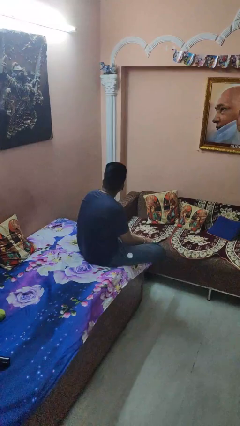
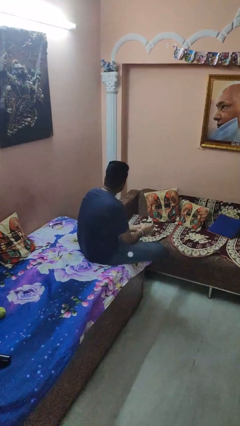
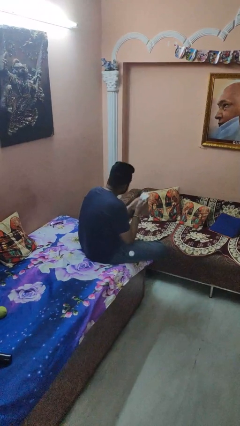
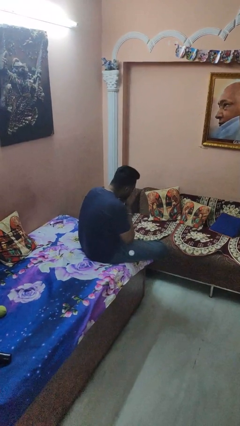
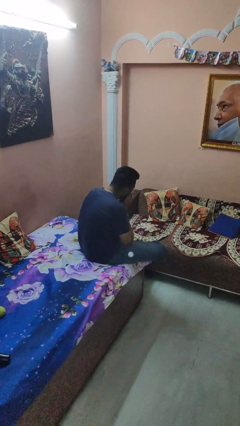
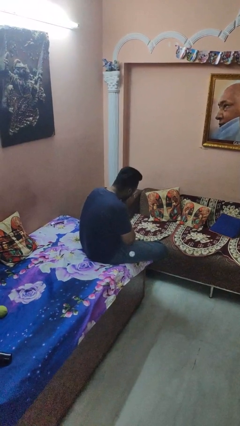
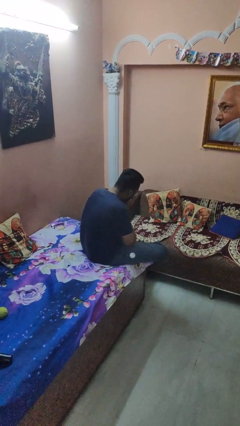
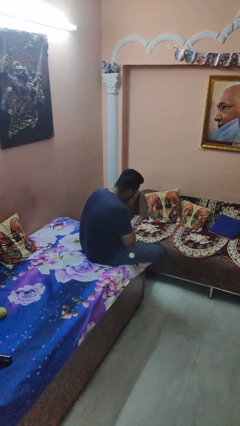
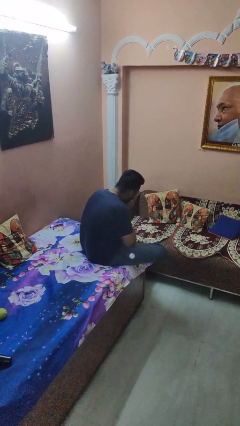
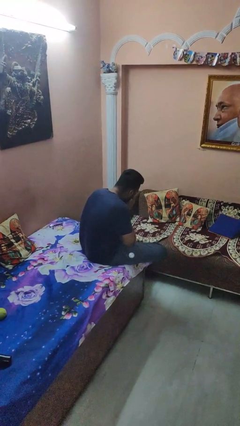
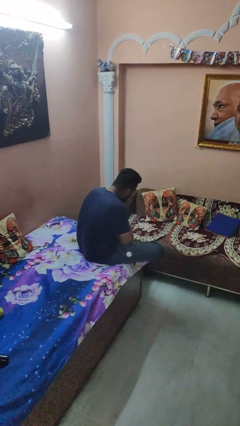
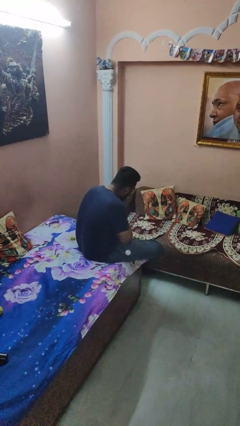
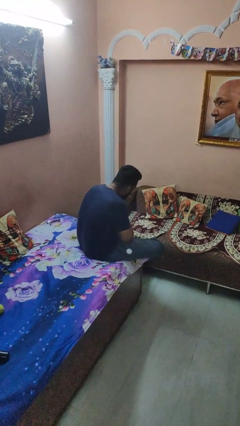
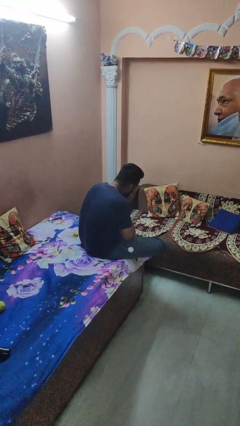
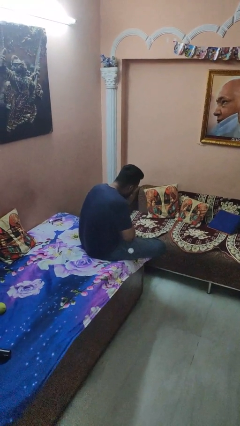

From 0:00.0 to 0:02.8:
person blows nose

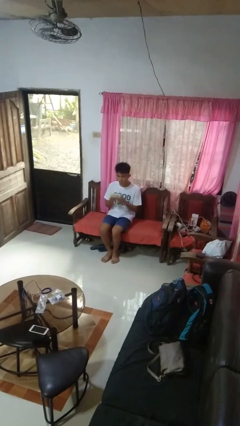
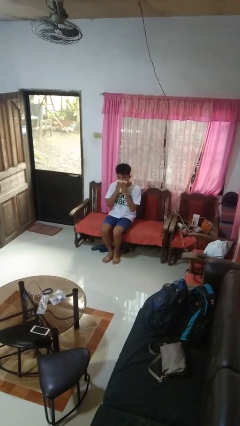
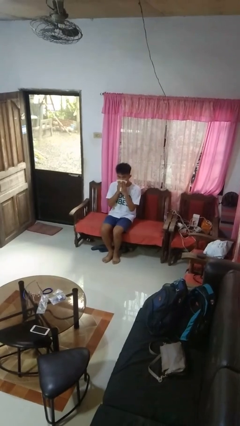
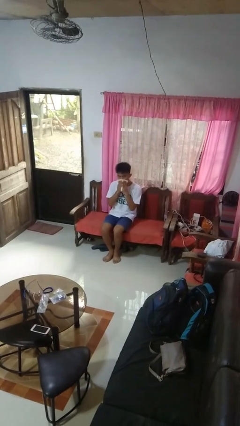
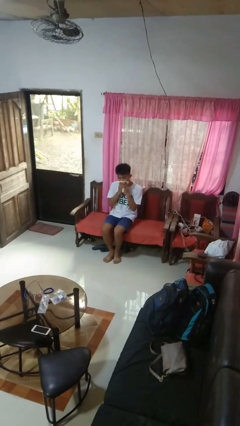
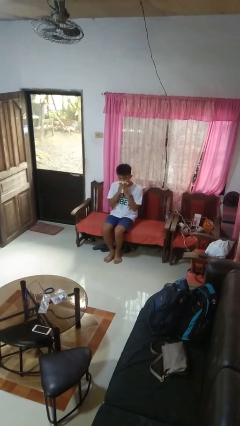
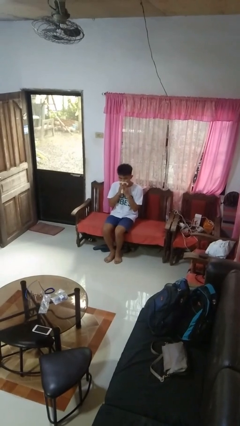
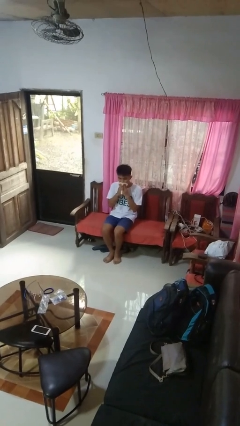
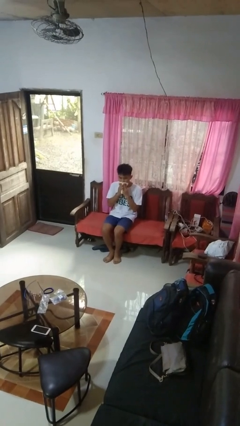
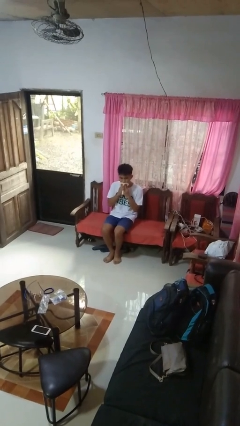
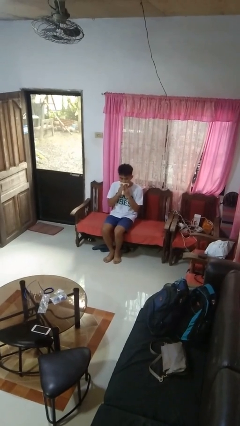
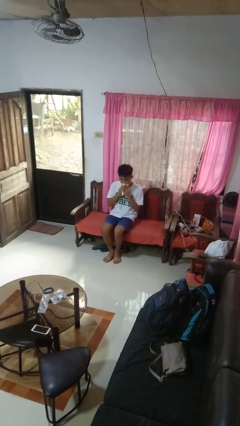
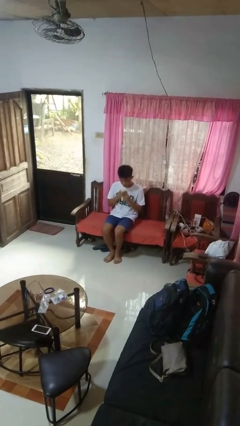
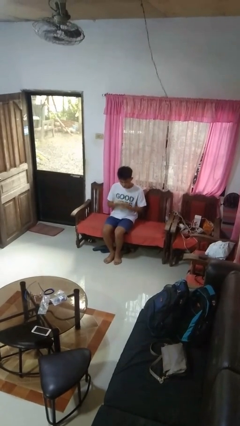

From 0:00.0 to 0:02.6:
person wipes mouth with napkin

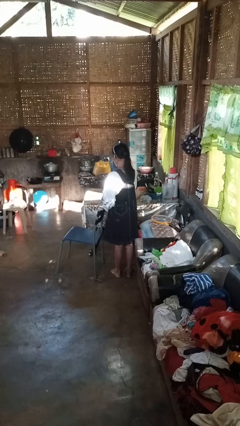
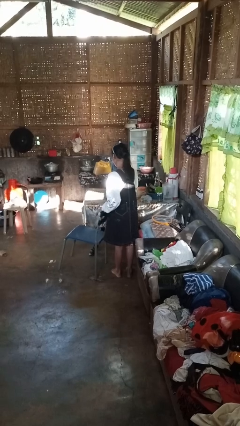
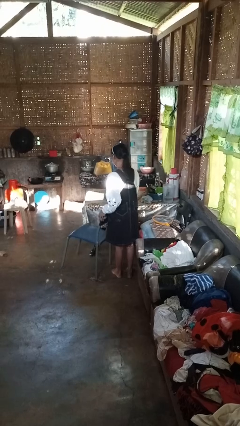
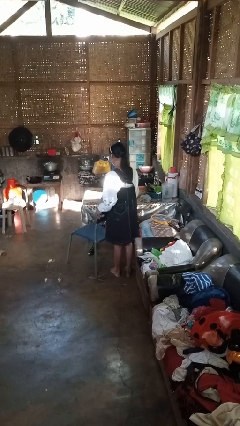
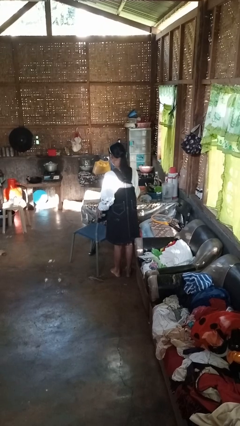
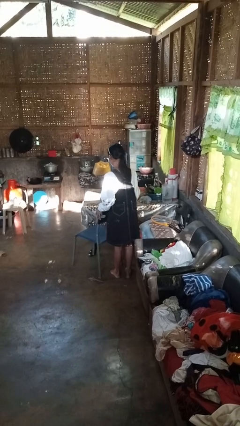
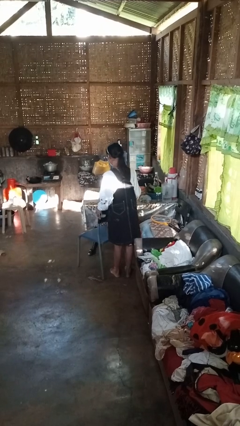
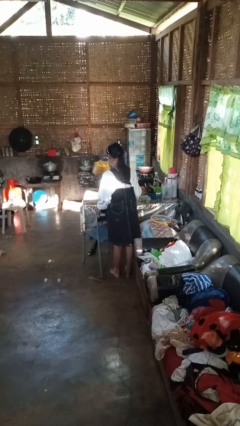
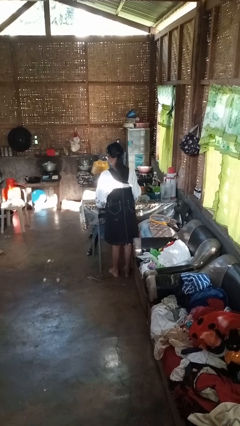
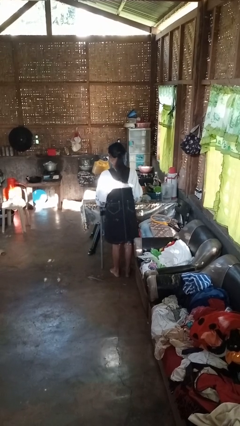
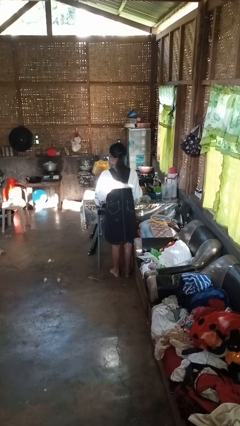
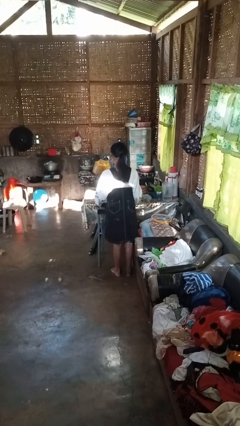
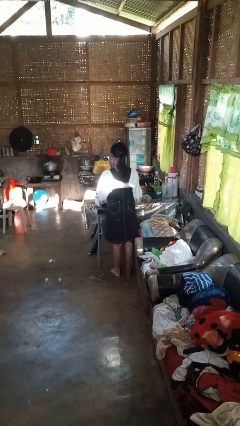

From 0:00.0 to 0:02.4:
person pushes in chair

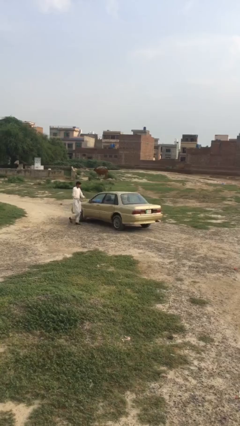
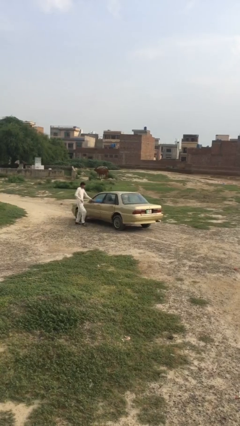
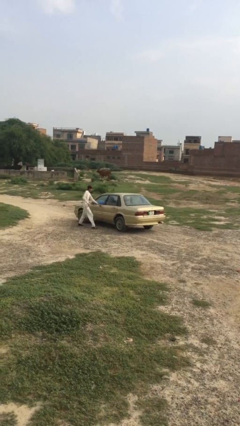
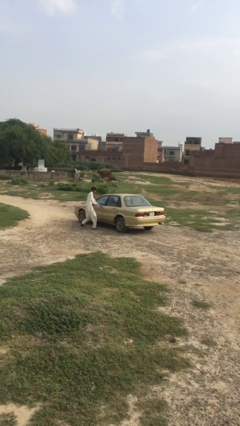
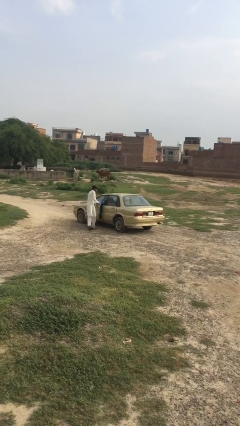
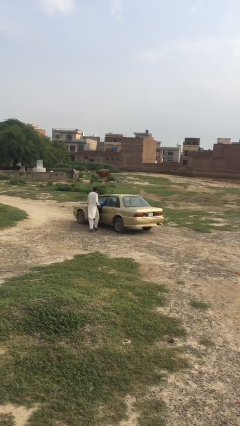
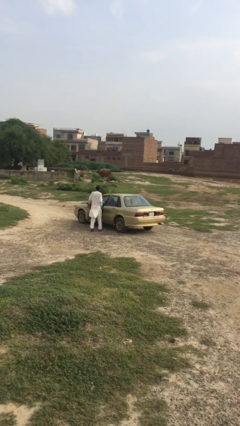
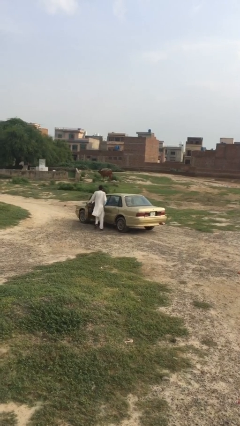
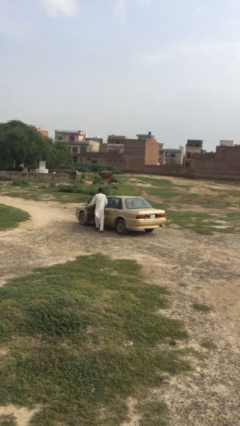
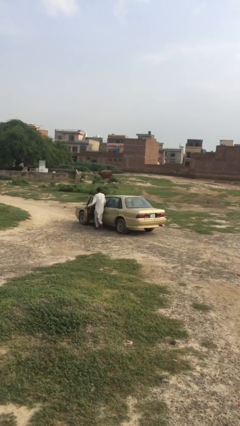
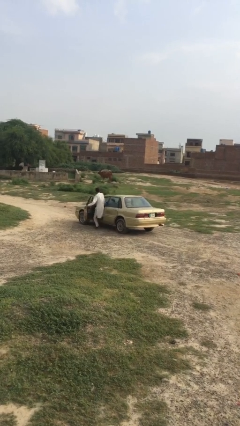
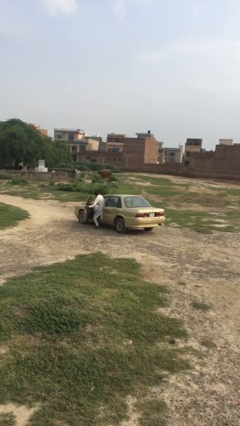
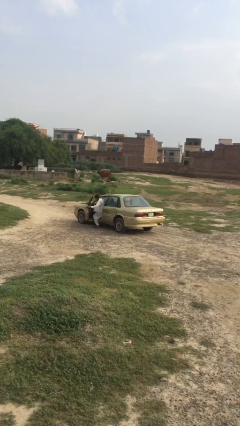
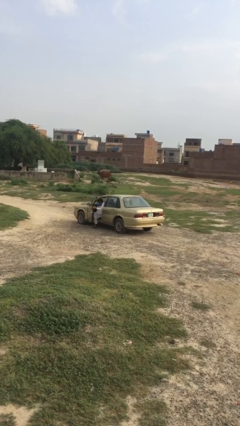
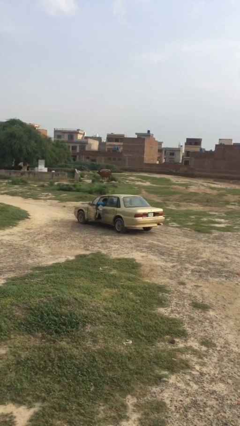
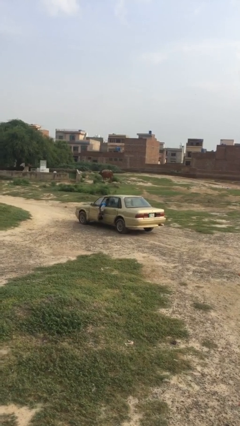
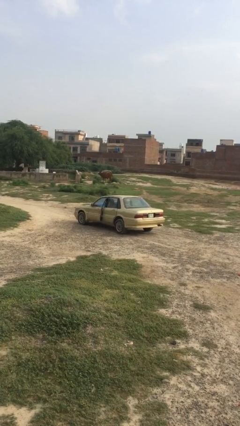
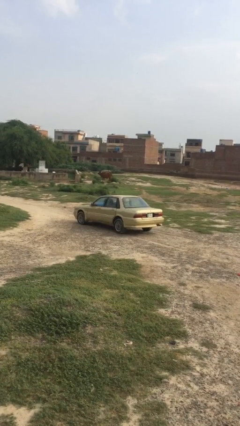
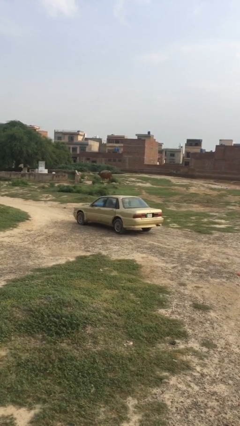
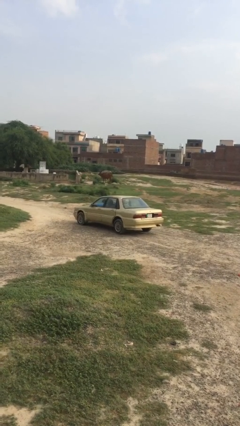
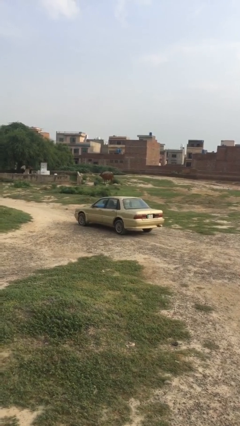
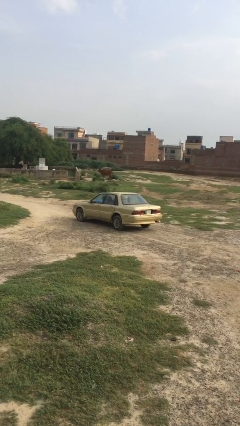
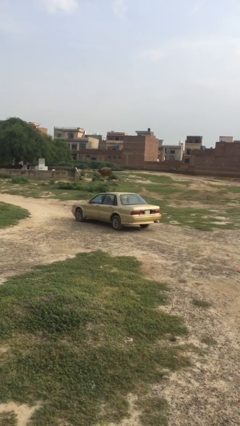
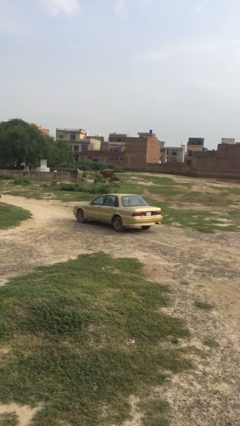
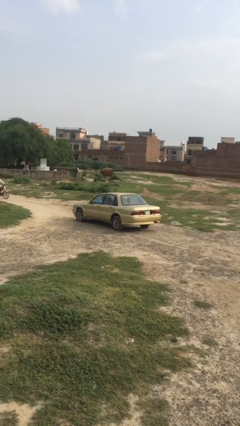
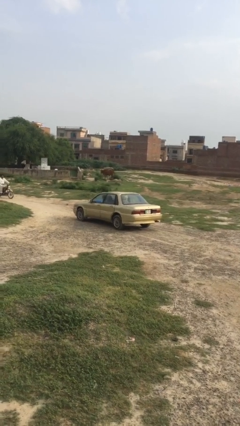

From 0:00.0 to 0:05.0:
car picks up person

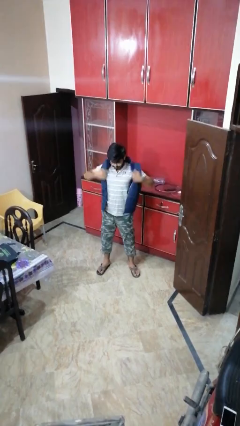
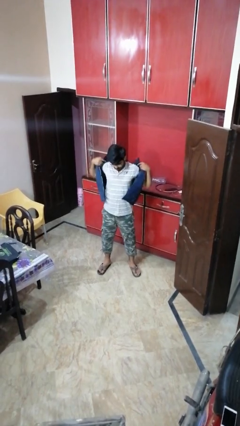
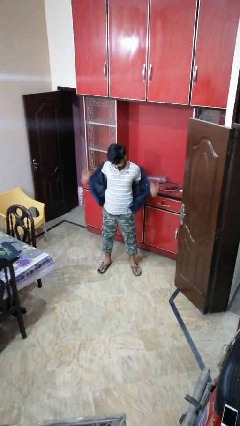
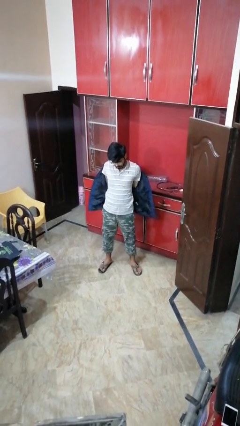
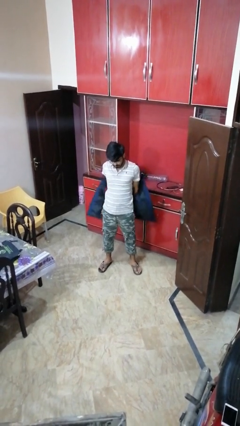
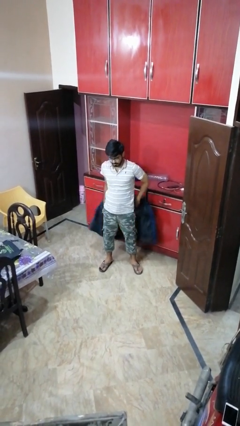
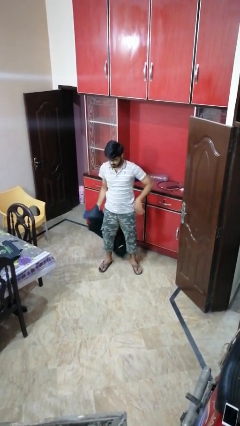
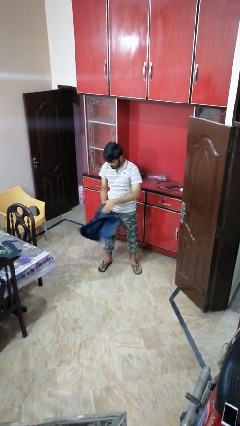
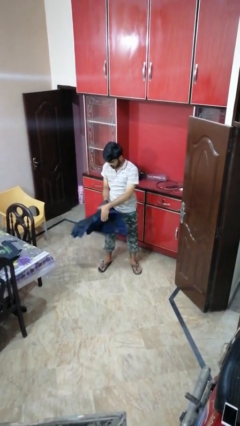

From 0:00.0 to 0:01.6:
person takes off jacket

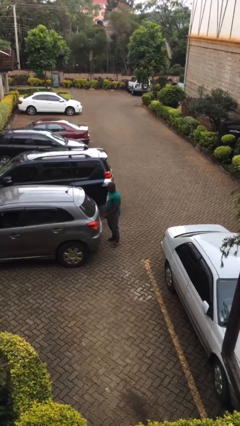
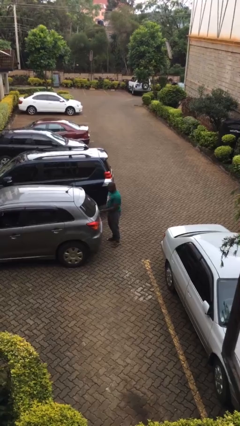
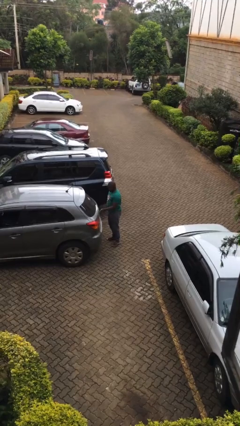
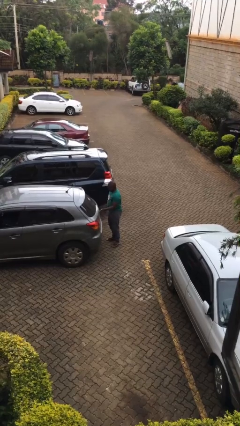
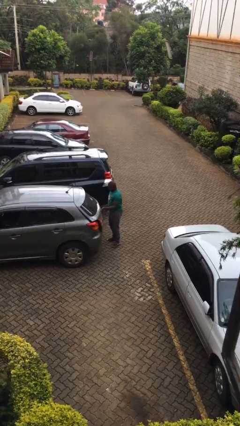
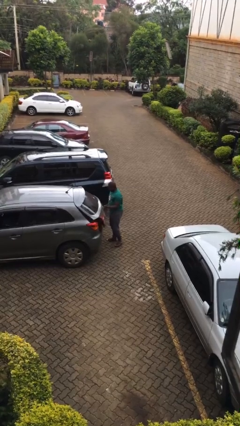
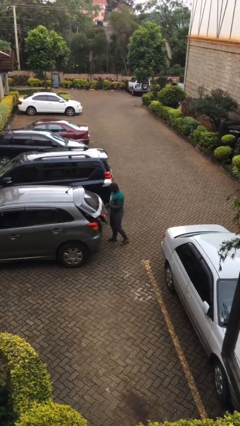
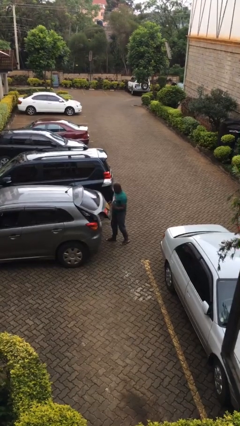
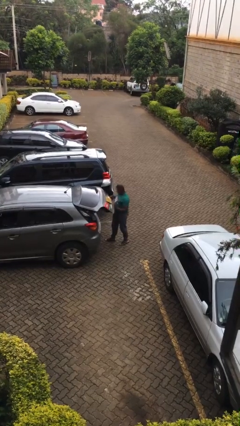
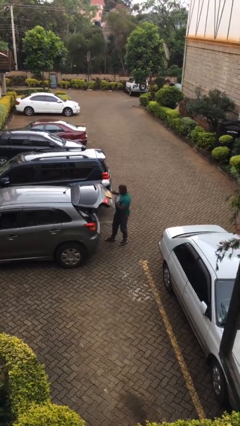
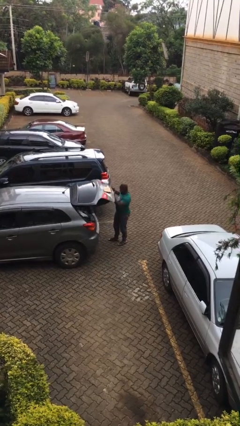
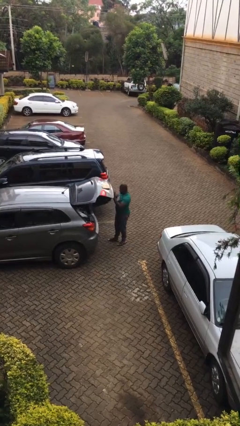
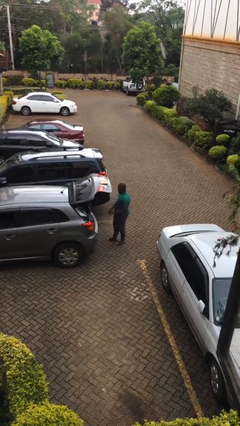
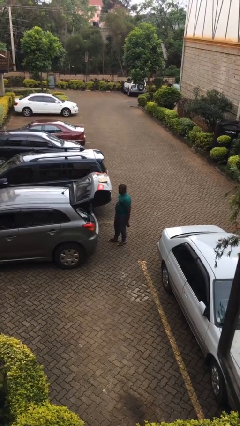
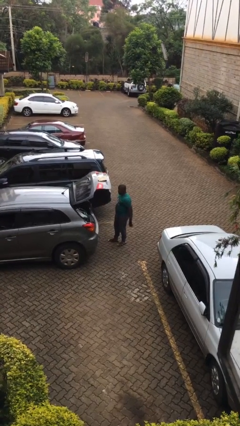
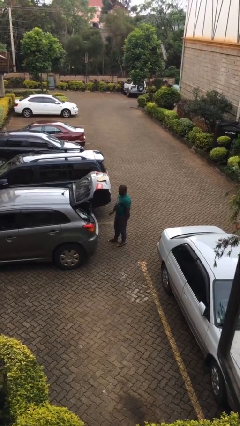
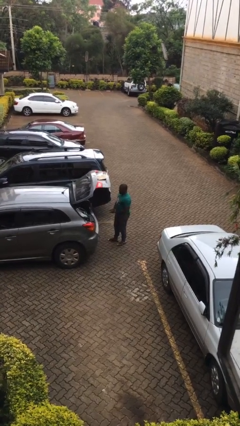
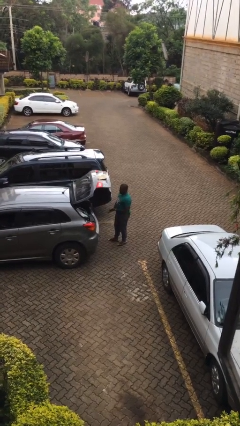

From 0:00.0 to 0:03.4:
person opens car trunk
